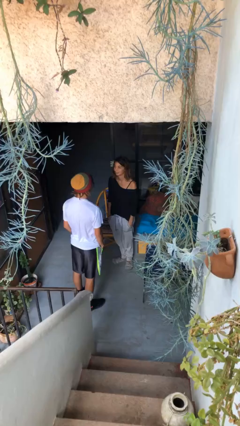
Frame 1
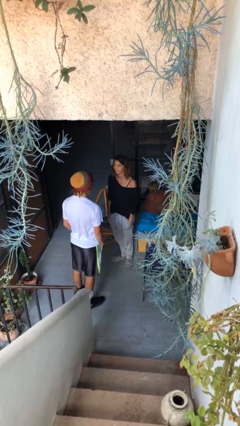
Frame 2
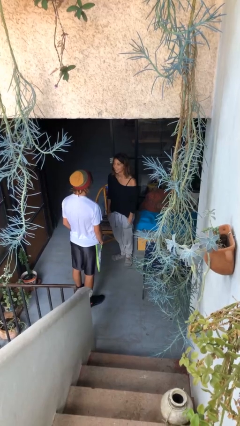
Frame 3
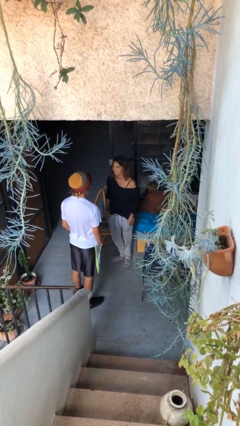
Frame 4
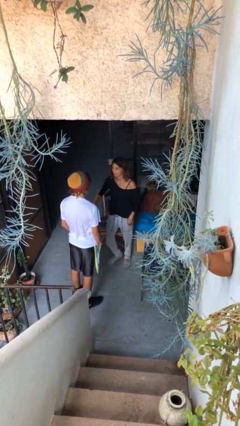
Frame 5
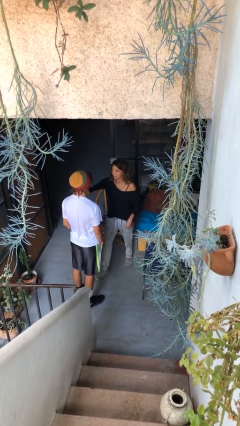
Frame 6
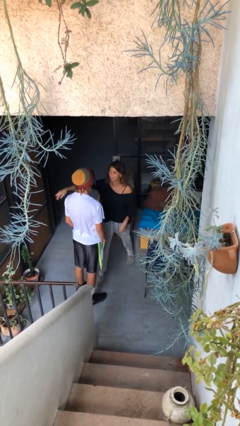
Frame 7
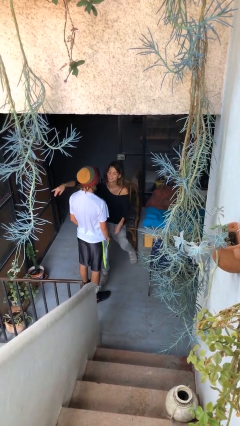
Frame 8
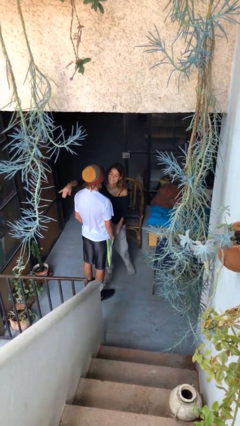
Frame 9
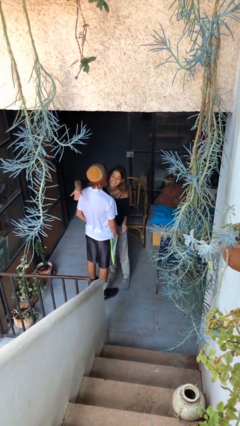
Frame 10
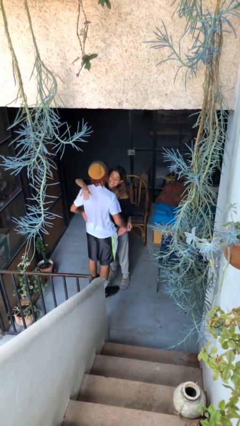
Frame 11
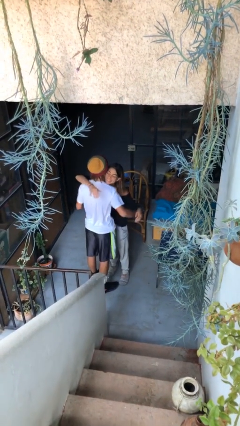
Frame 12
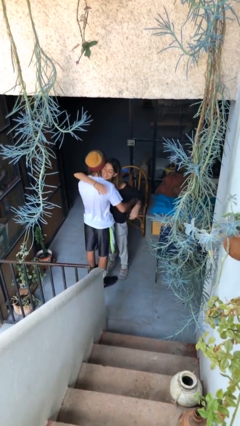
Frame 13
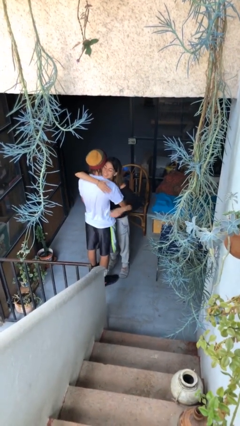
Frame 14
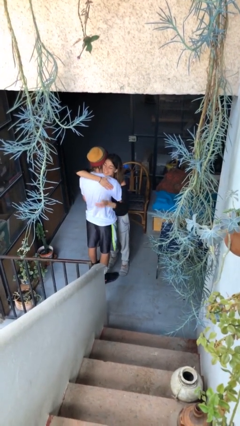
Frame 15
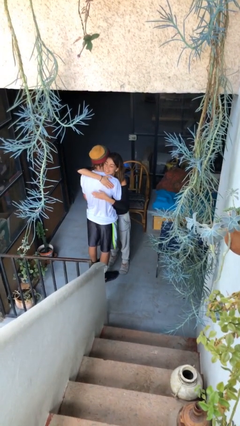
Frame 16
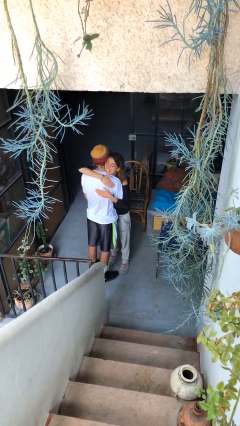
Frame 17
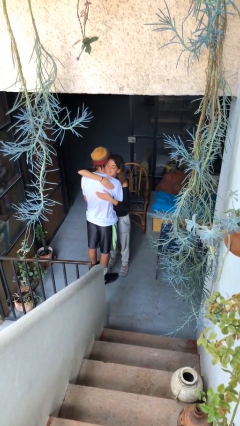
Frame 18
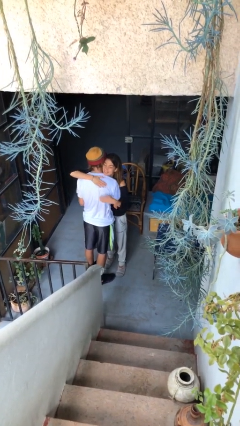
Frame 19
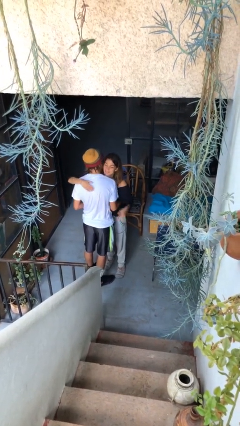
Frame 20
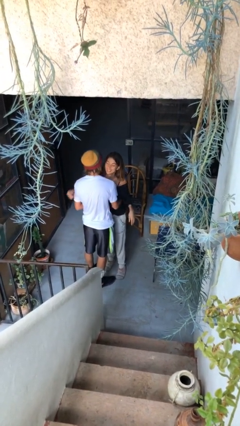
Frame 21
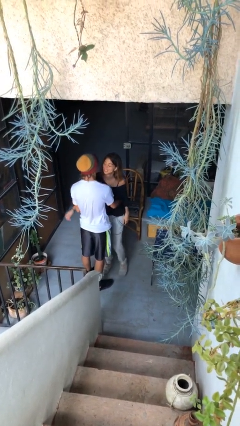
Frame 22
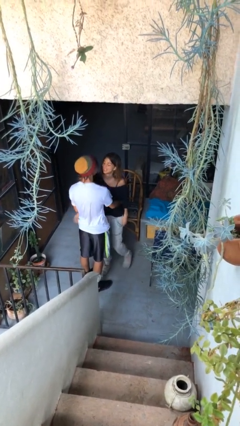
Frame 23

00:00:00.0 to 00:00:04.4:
person embraces person

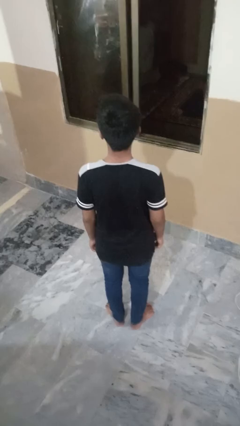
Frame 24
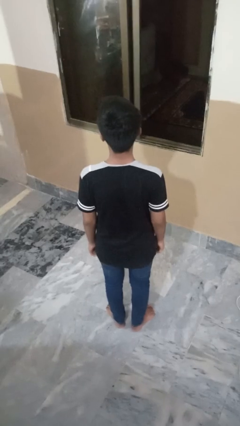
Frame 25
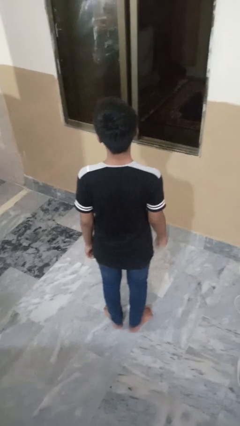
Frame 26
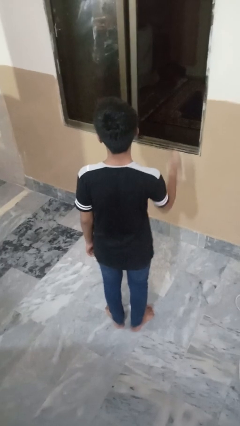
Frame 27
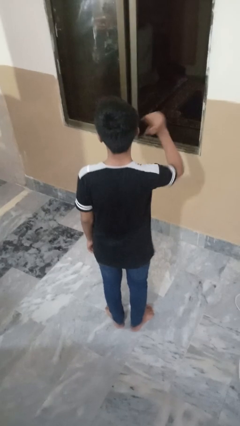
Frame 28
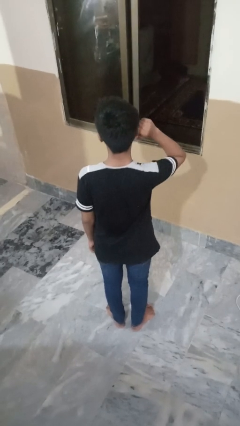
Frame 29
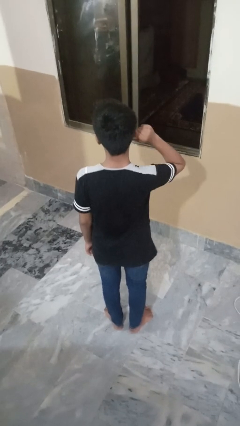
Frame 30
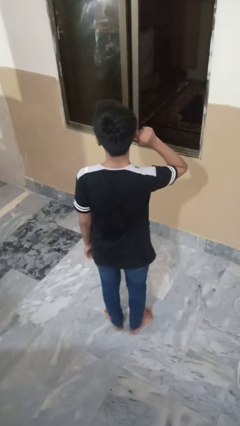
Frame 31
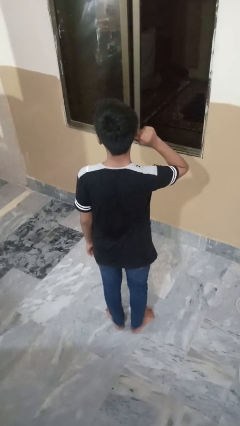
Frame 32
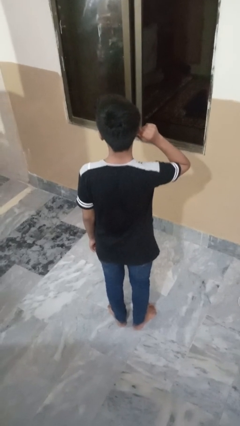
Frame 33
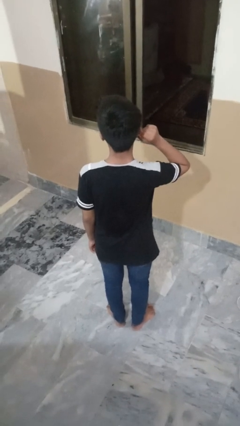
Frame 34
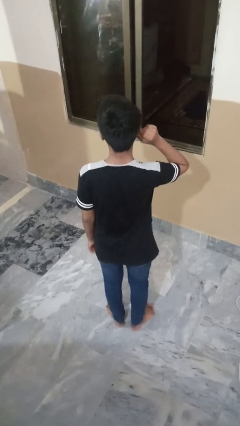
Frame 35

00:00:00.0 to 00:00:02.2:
person touches earlobe

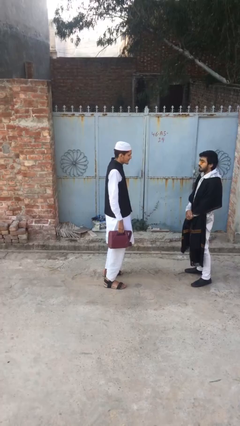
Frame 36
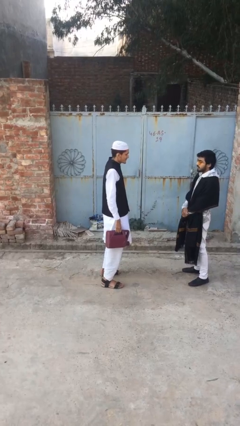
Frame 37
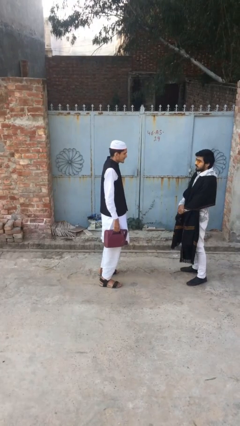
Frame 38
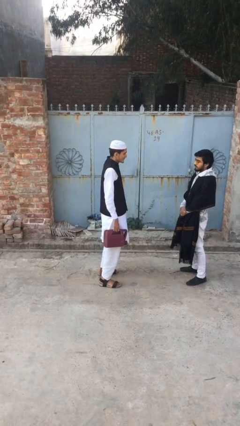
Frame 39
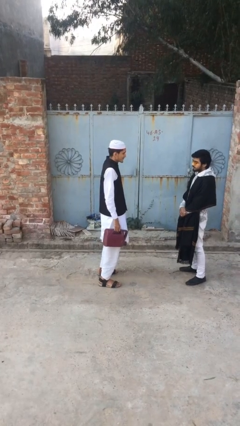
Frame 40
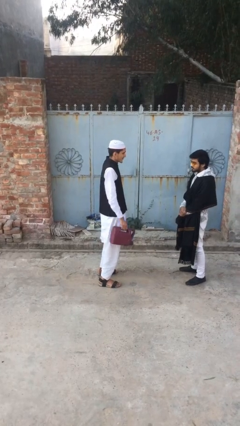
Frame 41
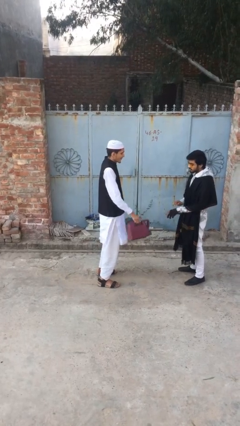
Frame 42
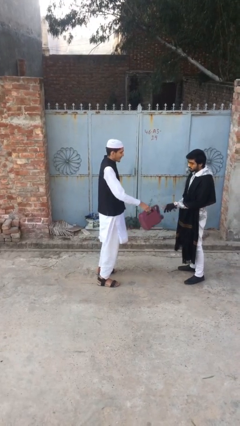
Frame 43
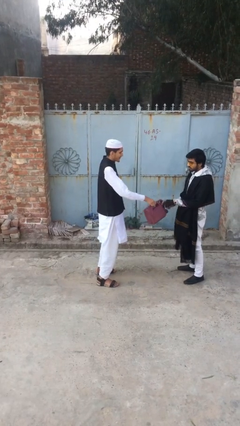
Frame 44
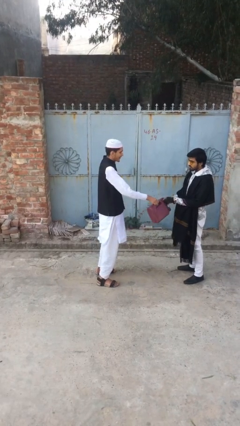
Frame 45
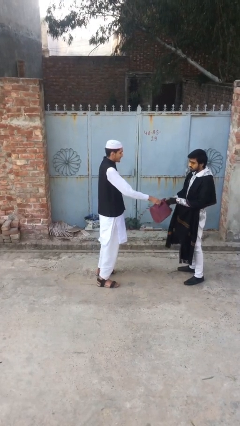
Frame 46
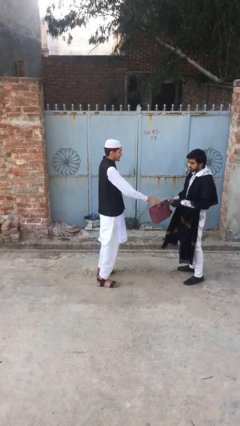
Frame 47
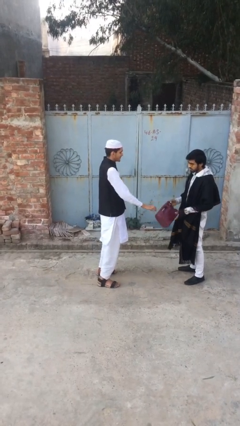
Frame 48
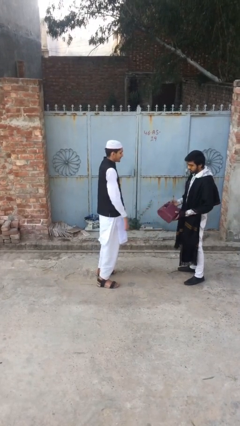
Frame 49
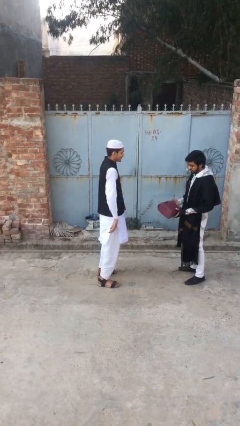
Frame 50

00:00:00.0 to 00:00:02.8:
person transfers object to person

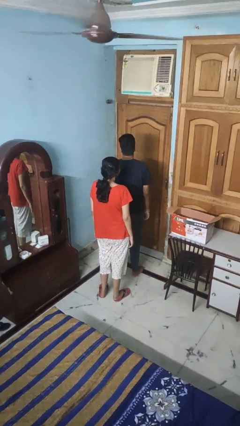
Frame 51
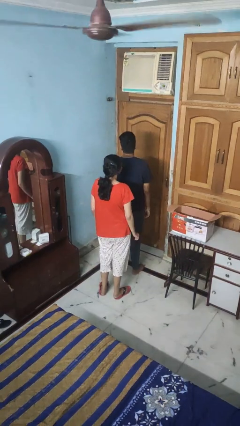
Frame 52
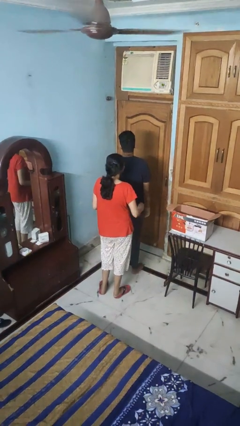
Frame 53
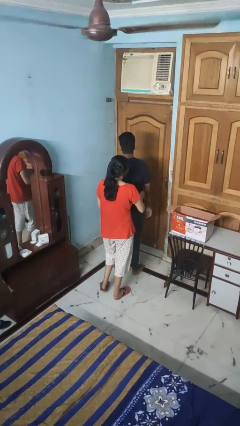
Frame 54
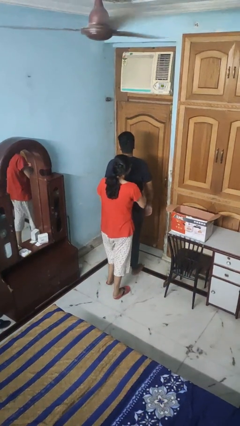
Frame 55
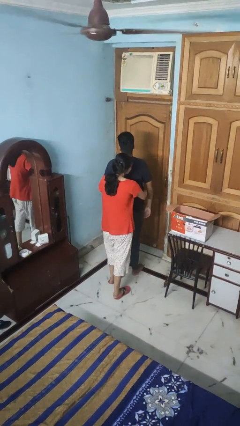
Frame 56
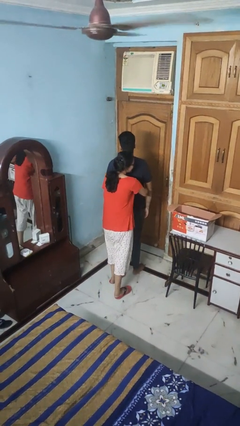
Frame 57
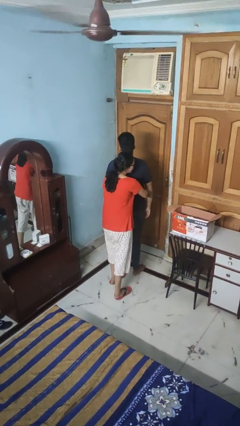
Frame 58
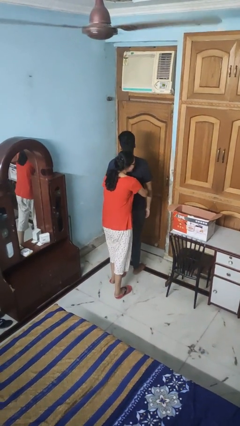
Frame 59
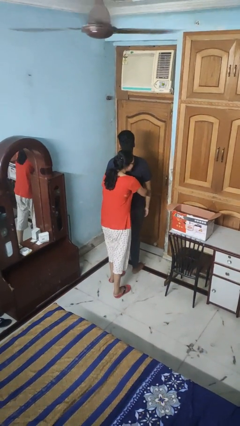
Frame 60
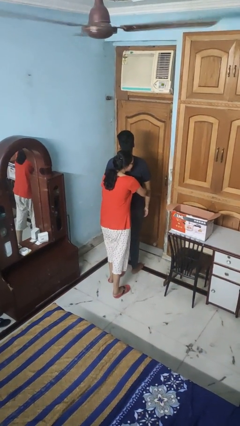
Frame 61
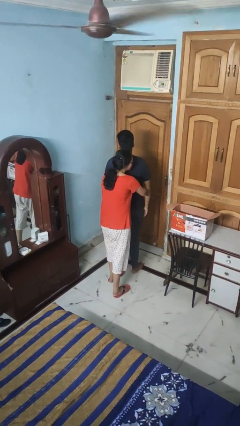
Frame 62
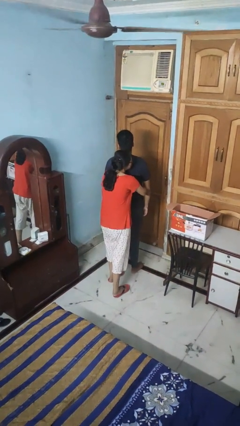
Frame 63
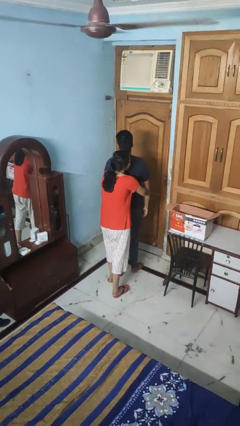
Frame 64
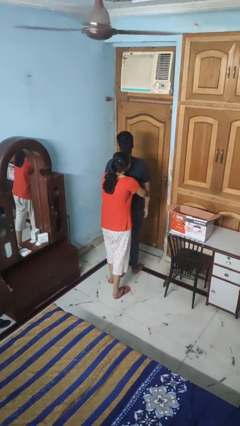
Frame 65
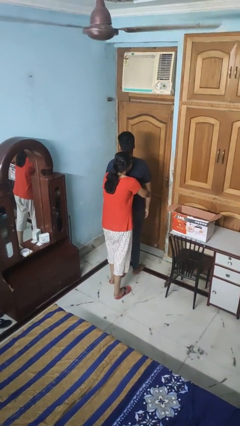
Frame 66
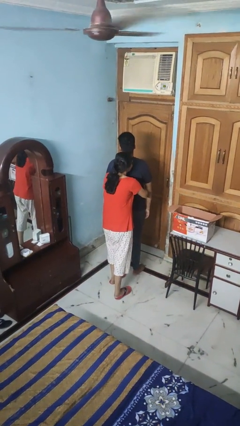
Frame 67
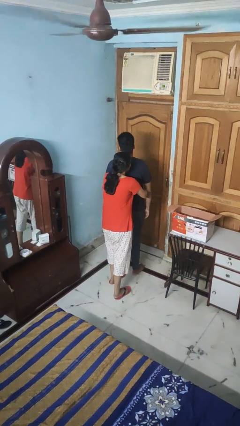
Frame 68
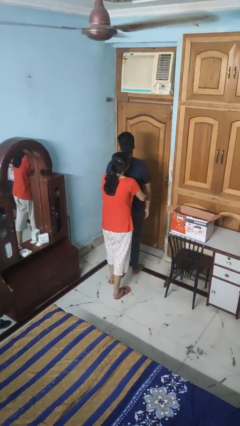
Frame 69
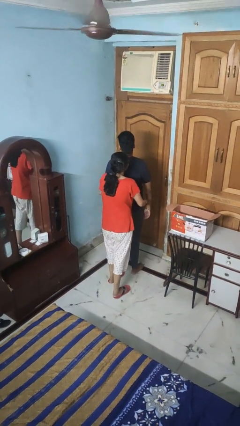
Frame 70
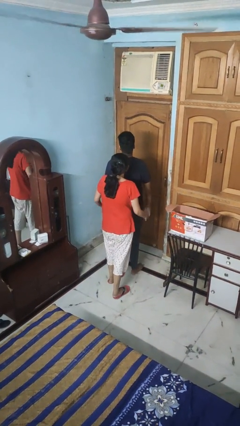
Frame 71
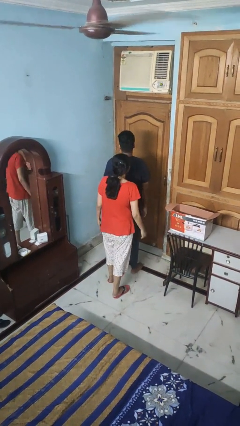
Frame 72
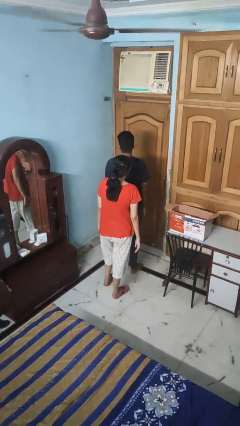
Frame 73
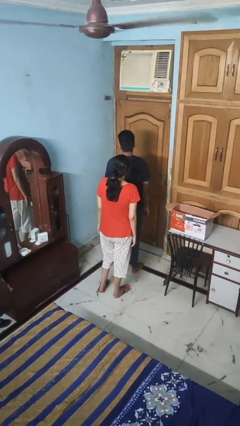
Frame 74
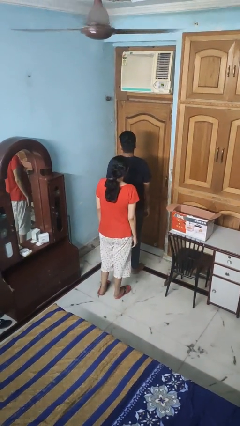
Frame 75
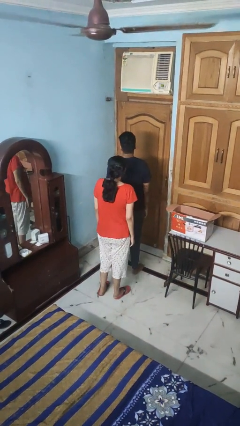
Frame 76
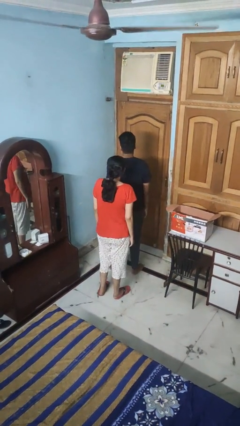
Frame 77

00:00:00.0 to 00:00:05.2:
person hugs person from behind

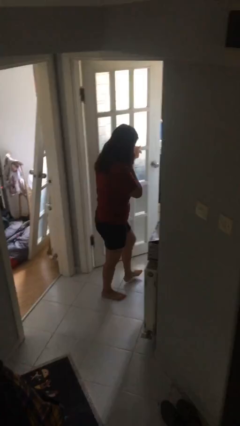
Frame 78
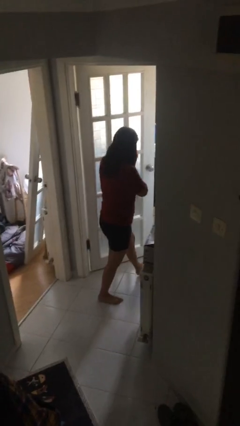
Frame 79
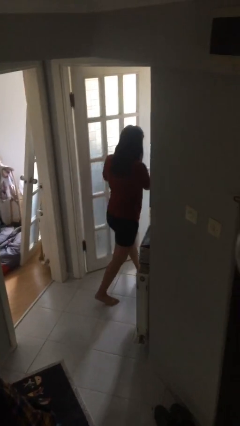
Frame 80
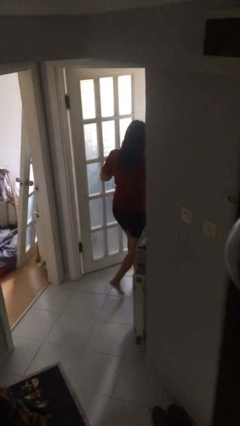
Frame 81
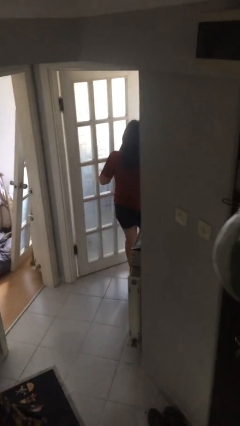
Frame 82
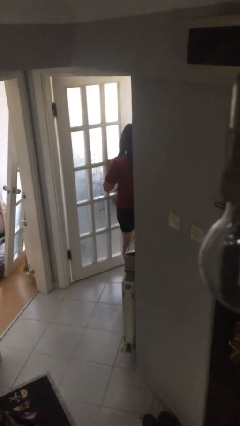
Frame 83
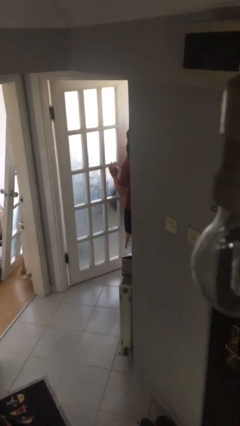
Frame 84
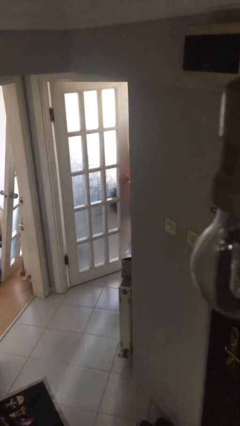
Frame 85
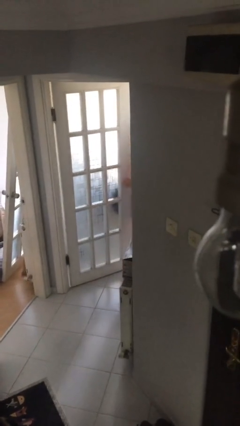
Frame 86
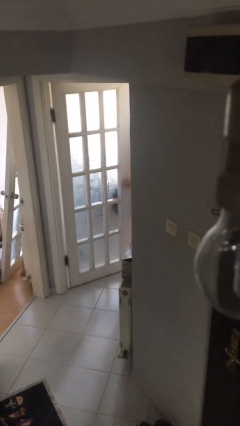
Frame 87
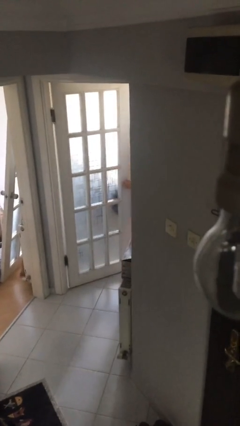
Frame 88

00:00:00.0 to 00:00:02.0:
person exits scene through structure

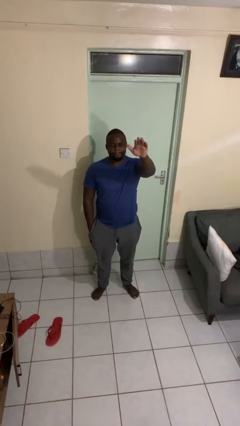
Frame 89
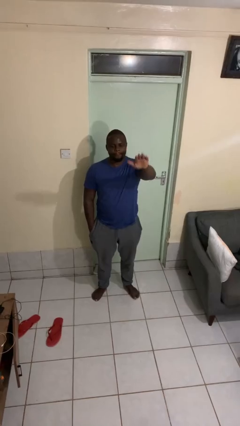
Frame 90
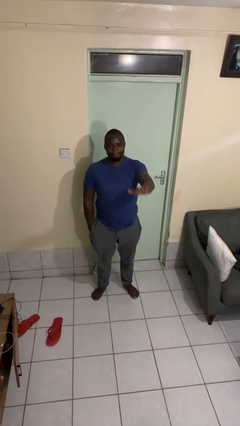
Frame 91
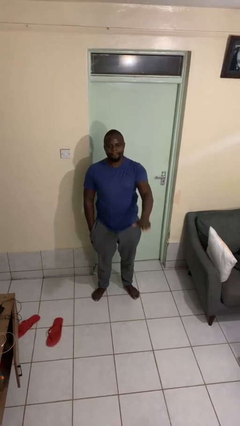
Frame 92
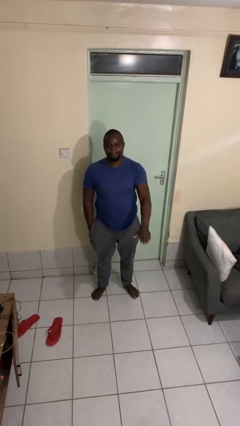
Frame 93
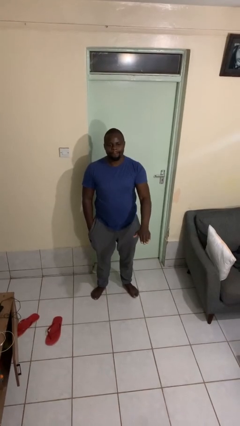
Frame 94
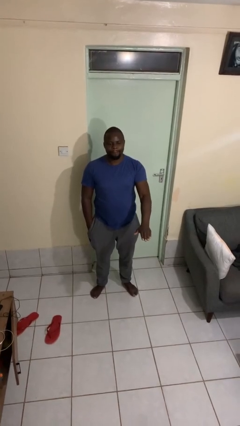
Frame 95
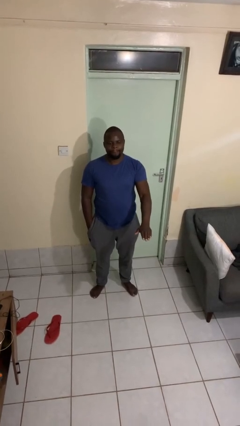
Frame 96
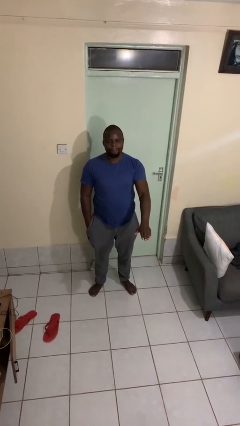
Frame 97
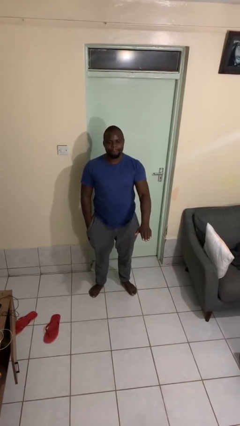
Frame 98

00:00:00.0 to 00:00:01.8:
person gestures swipe down
